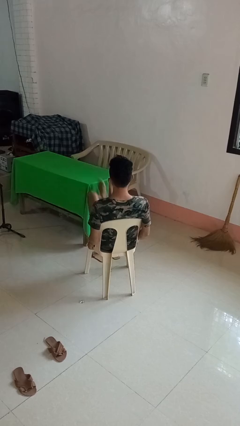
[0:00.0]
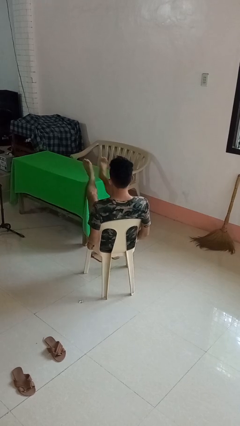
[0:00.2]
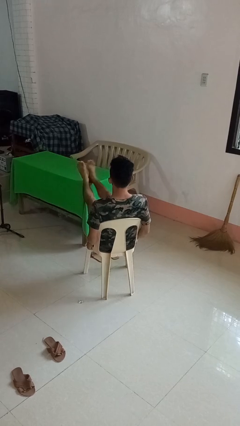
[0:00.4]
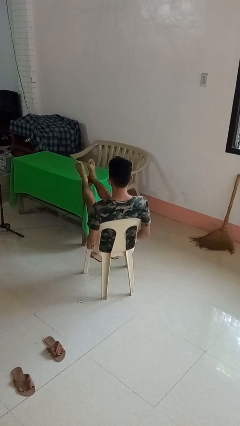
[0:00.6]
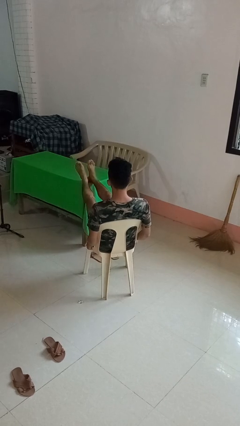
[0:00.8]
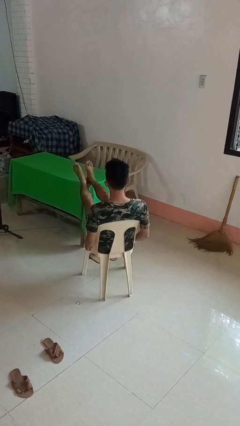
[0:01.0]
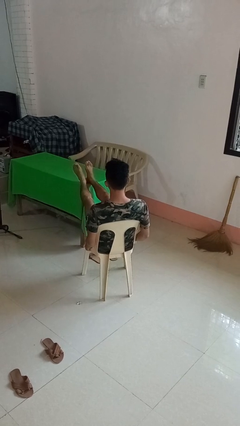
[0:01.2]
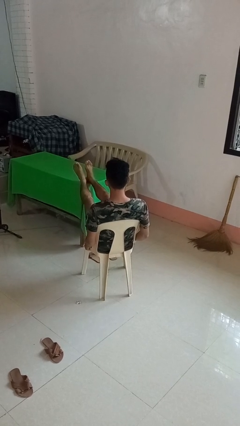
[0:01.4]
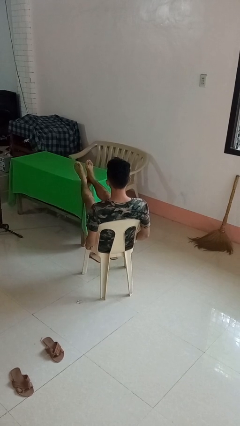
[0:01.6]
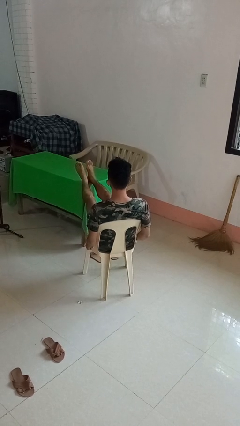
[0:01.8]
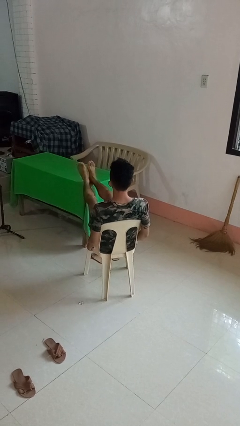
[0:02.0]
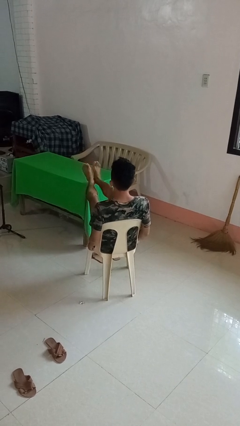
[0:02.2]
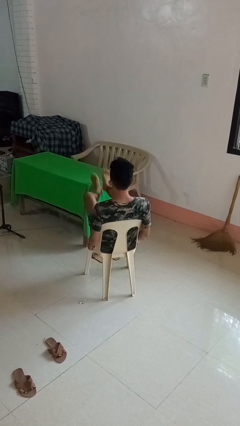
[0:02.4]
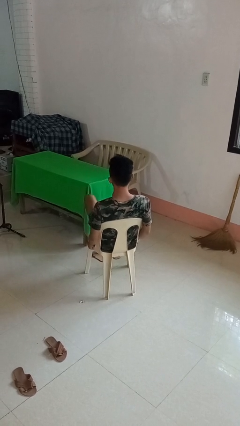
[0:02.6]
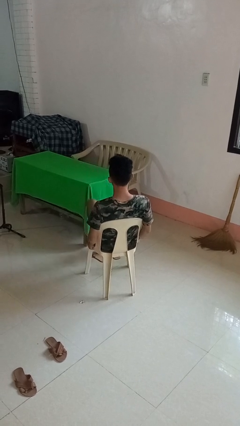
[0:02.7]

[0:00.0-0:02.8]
person puts feet up

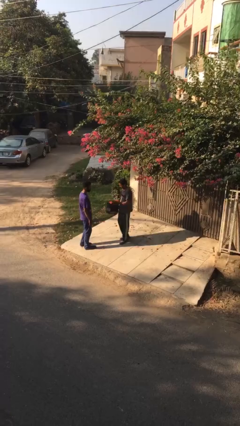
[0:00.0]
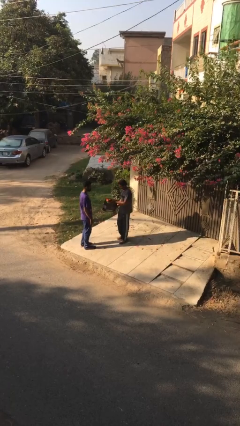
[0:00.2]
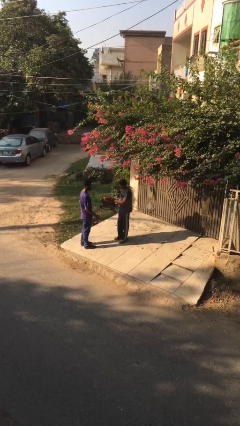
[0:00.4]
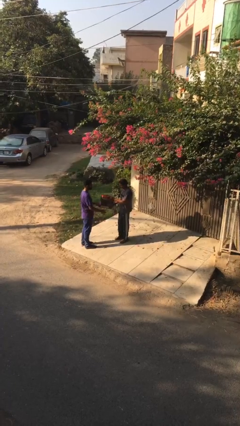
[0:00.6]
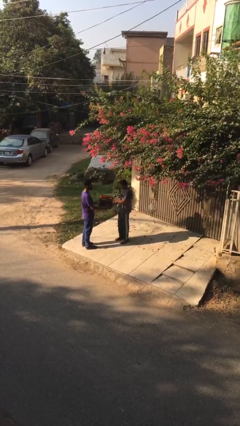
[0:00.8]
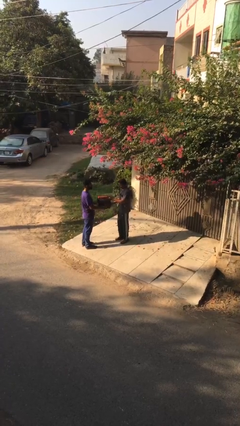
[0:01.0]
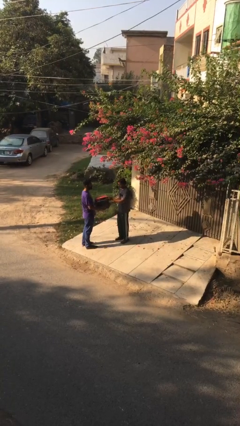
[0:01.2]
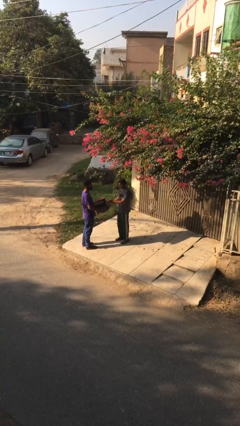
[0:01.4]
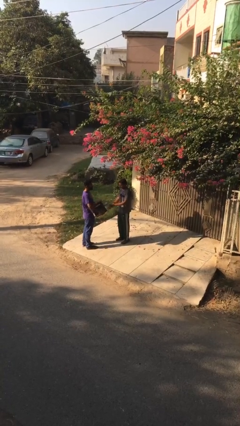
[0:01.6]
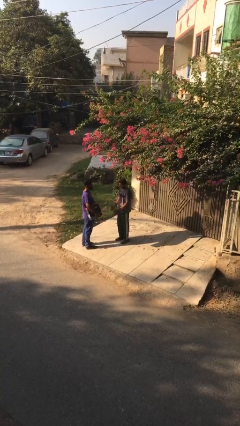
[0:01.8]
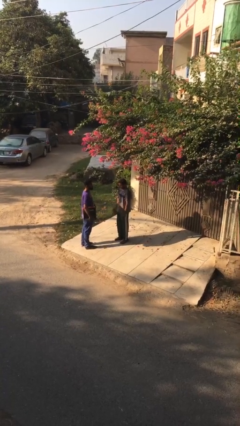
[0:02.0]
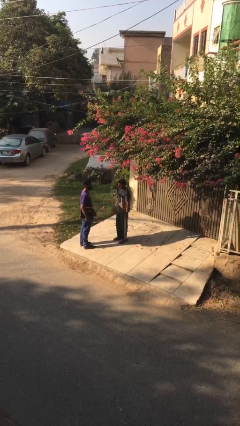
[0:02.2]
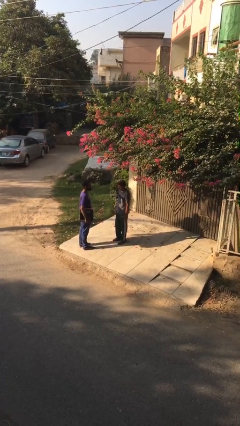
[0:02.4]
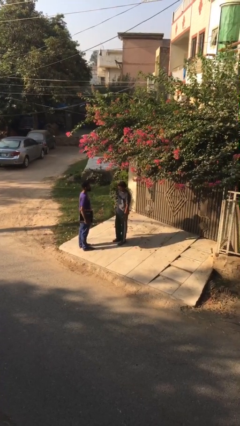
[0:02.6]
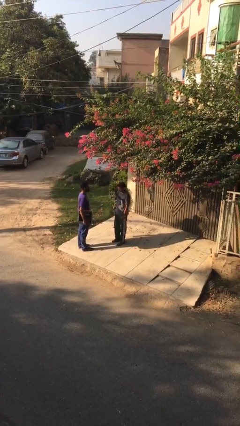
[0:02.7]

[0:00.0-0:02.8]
person transfers object to person

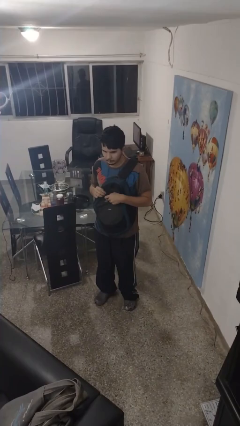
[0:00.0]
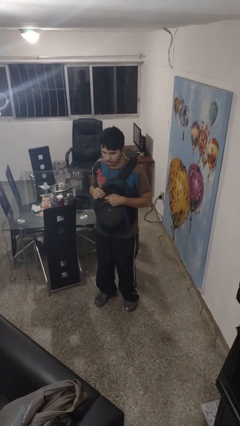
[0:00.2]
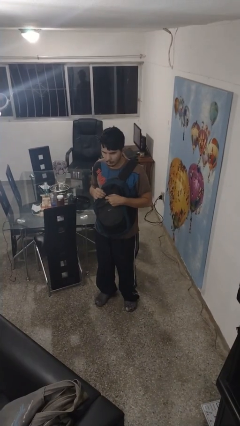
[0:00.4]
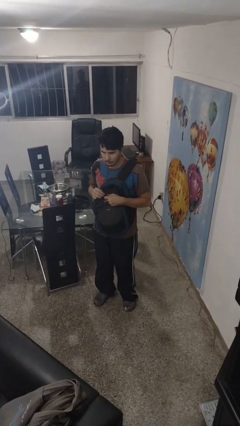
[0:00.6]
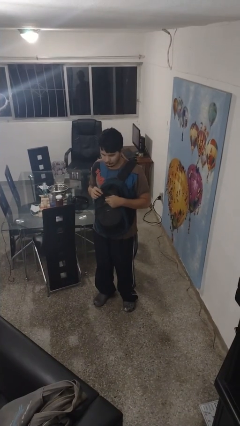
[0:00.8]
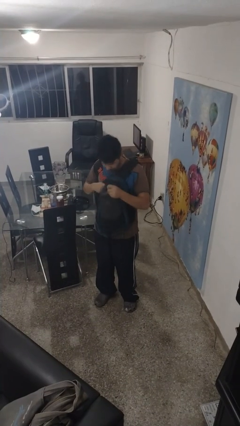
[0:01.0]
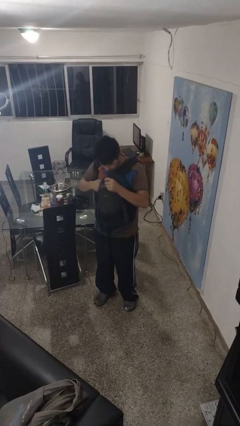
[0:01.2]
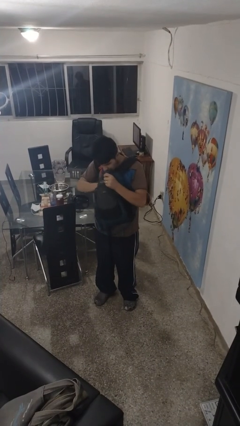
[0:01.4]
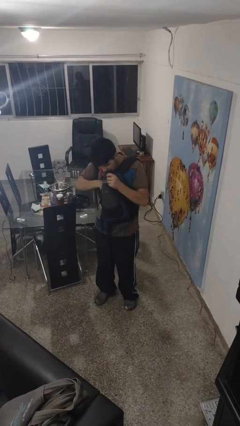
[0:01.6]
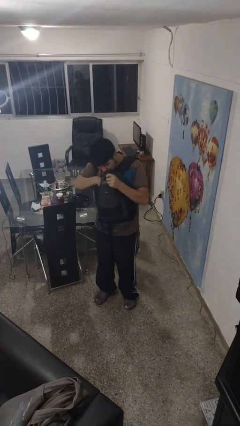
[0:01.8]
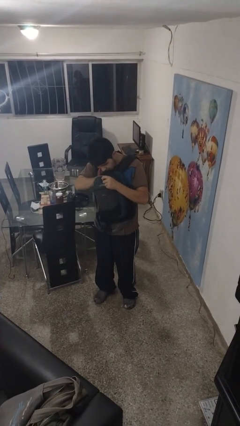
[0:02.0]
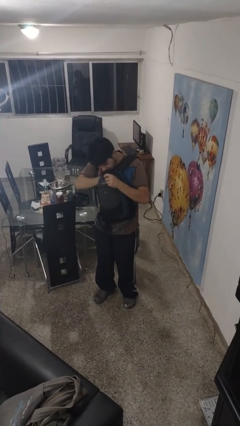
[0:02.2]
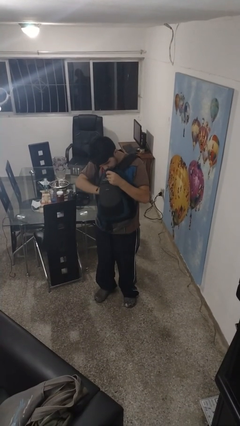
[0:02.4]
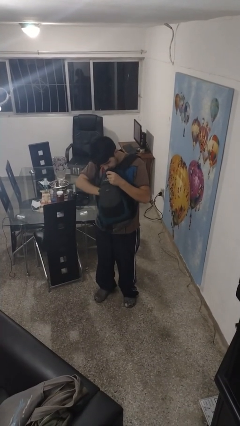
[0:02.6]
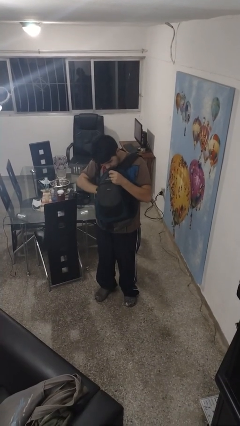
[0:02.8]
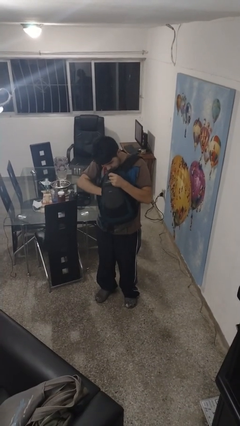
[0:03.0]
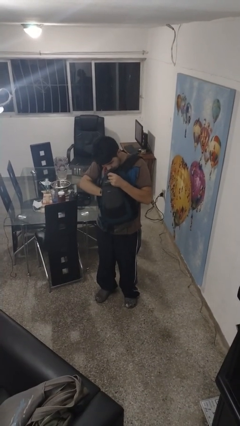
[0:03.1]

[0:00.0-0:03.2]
person searches in backpack

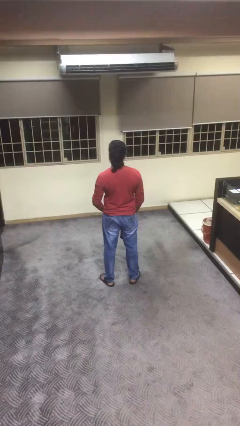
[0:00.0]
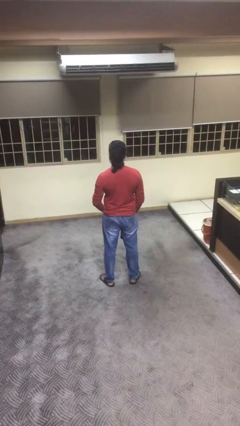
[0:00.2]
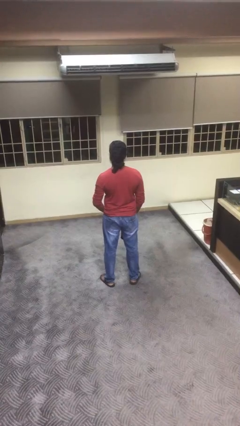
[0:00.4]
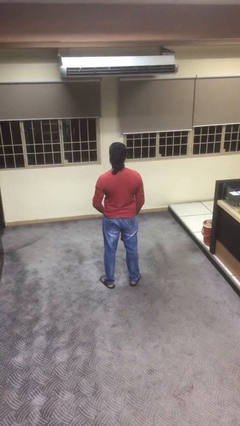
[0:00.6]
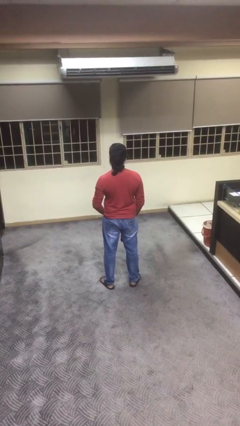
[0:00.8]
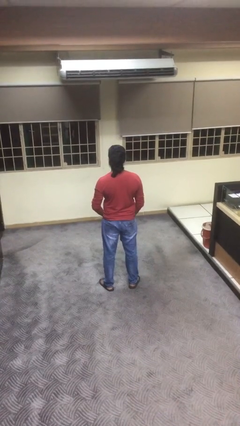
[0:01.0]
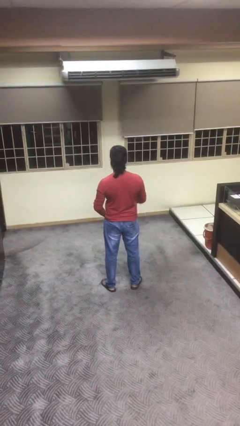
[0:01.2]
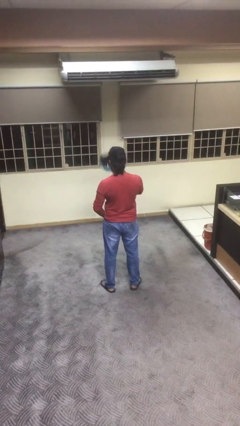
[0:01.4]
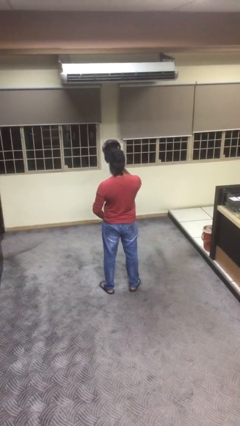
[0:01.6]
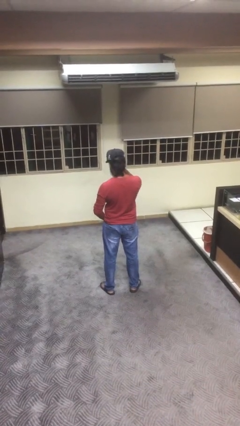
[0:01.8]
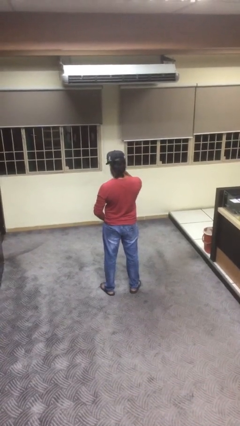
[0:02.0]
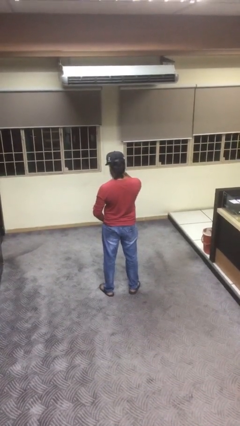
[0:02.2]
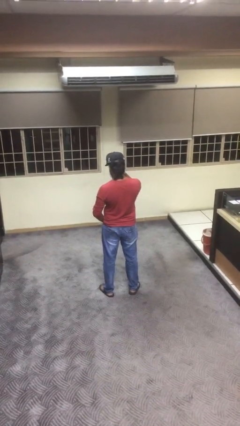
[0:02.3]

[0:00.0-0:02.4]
person puts on hat

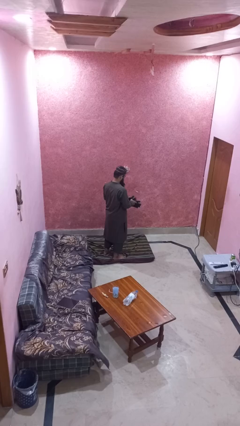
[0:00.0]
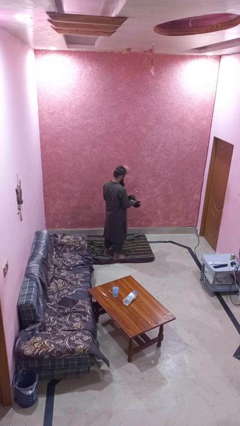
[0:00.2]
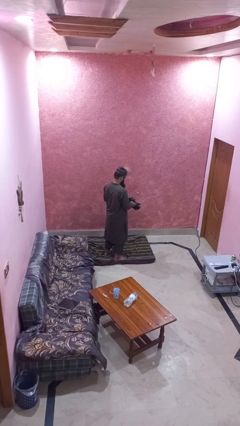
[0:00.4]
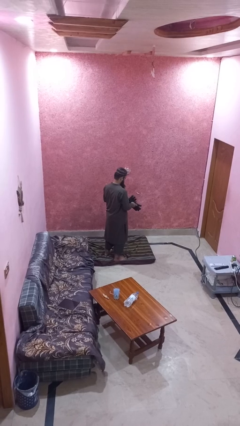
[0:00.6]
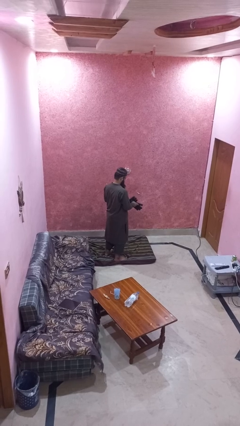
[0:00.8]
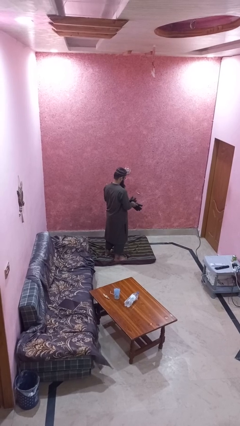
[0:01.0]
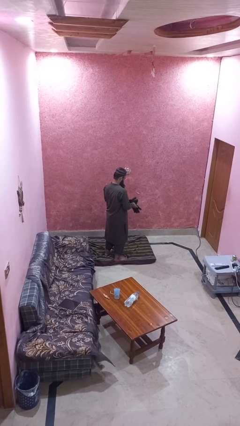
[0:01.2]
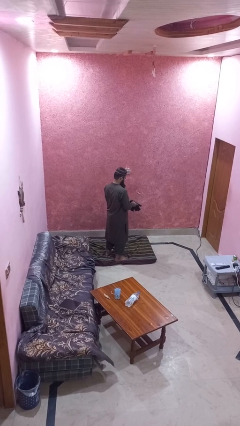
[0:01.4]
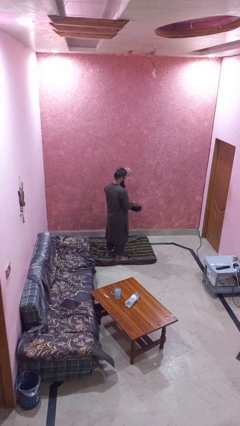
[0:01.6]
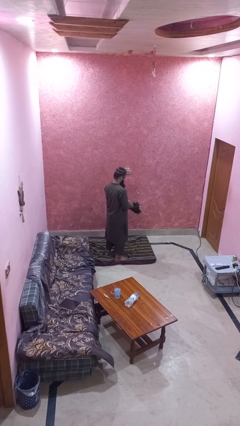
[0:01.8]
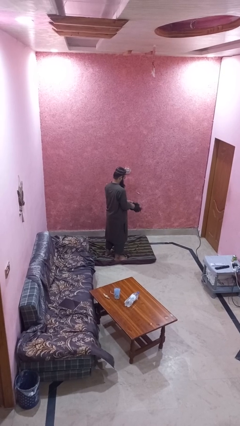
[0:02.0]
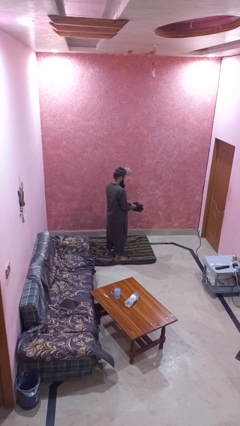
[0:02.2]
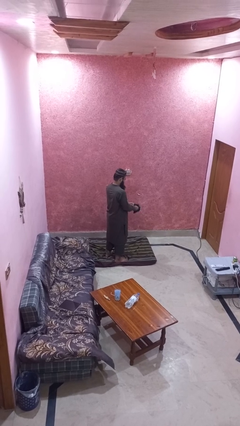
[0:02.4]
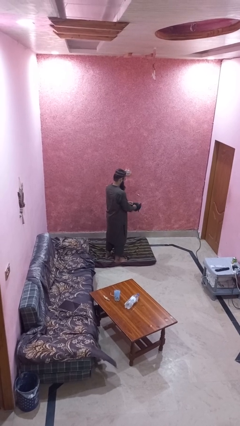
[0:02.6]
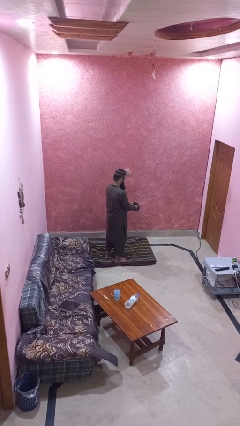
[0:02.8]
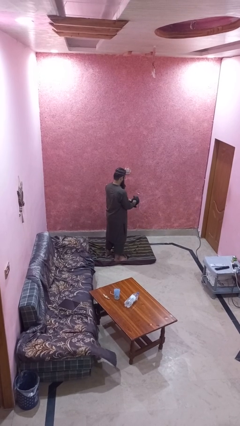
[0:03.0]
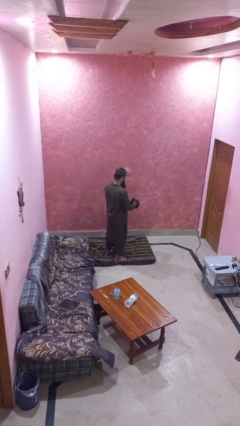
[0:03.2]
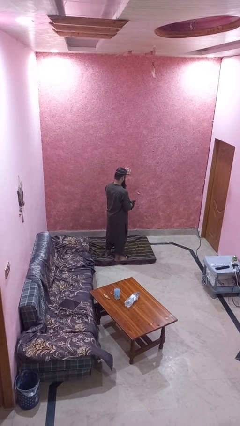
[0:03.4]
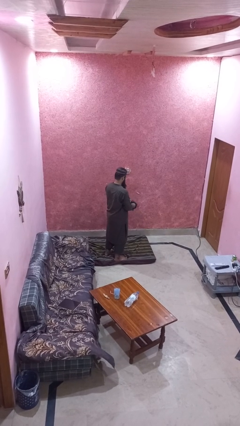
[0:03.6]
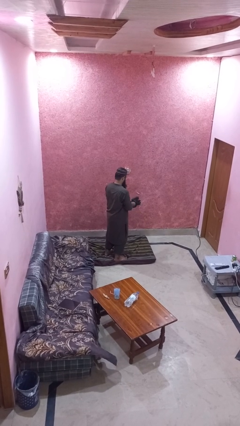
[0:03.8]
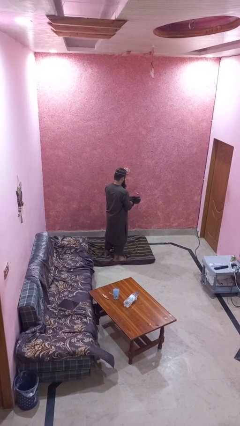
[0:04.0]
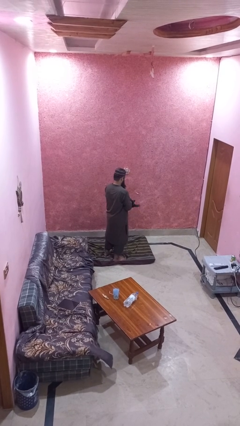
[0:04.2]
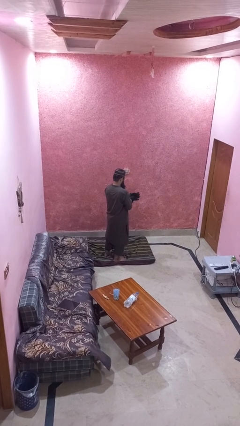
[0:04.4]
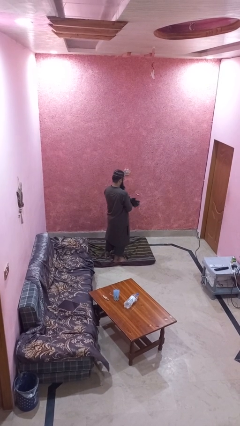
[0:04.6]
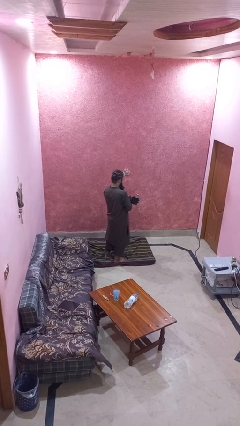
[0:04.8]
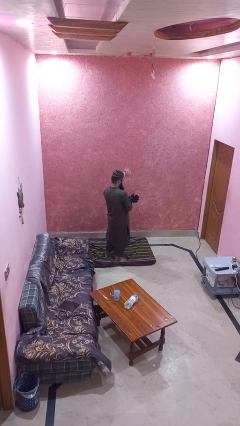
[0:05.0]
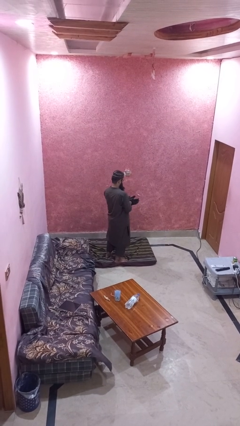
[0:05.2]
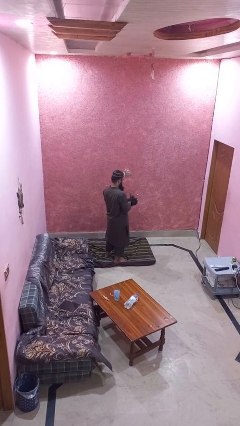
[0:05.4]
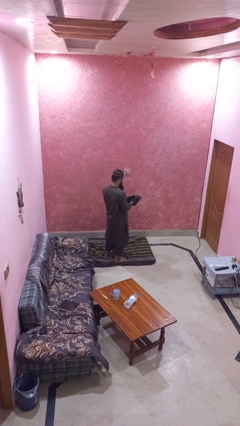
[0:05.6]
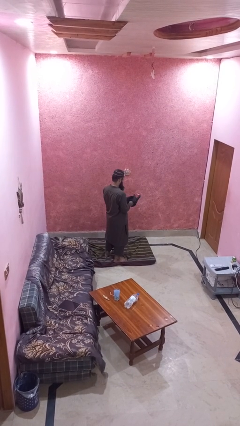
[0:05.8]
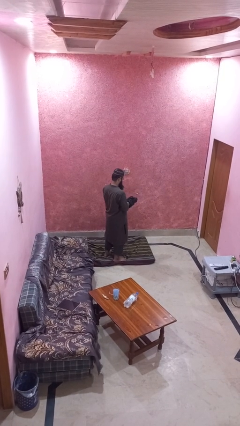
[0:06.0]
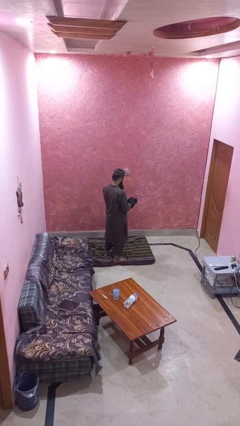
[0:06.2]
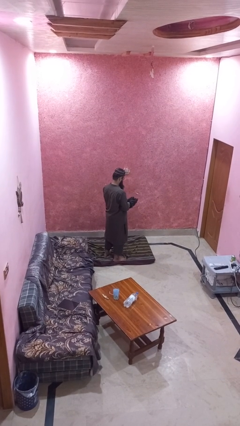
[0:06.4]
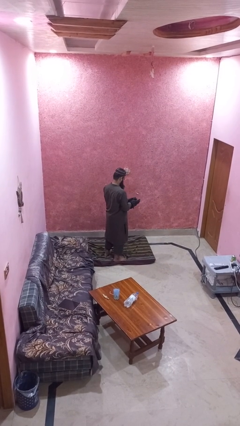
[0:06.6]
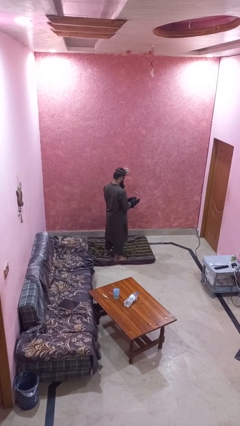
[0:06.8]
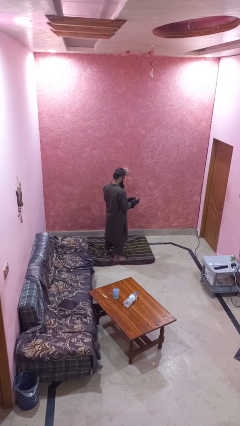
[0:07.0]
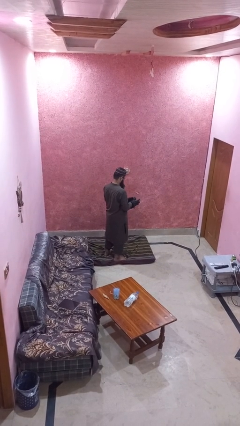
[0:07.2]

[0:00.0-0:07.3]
person puts on gloves
